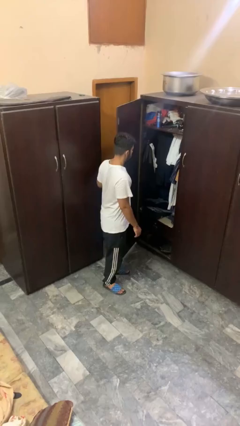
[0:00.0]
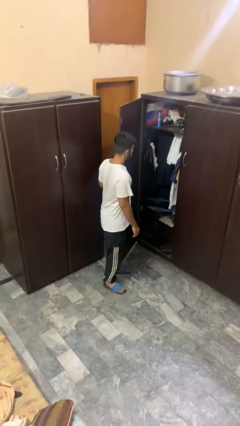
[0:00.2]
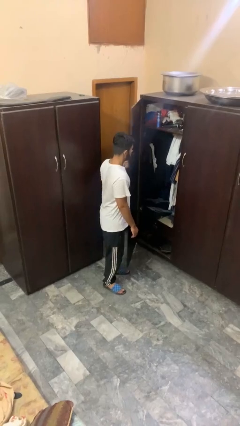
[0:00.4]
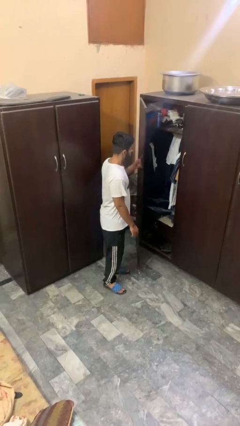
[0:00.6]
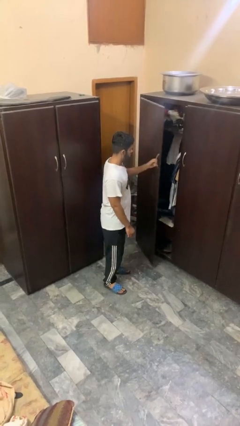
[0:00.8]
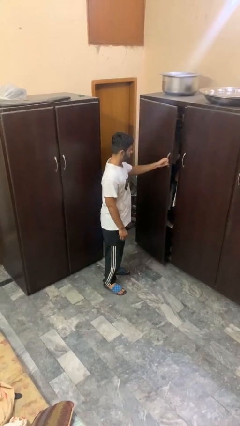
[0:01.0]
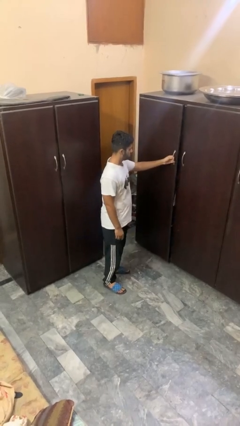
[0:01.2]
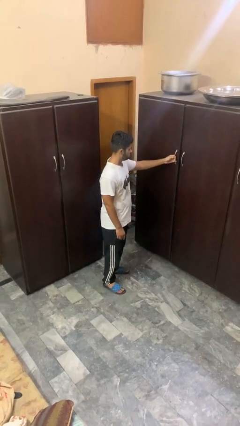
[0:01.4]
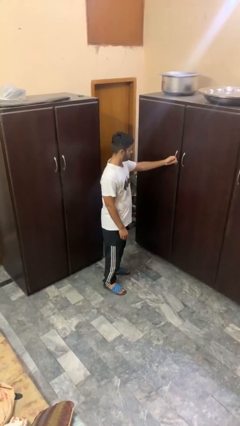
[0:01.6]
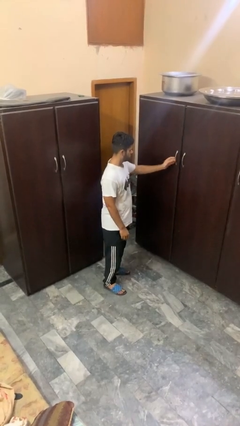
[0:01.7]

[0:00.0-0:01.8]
person closes closet door

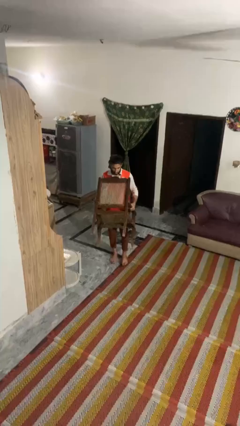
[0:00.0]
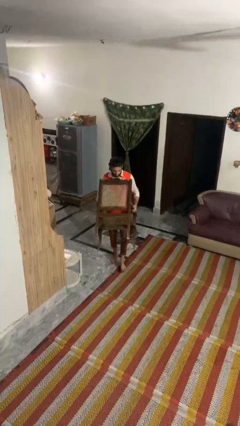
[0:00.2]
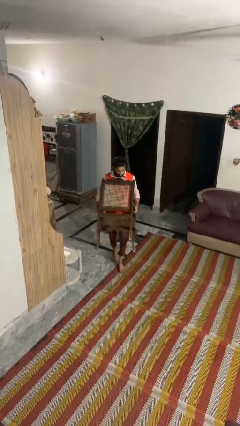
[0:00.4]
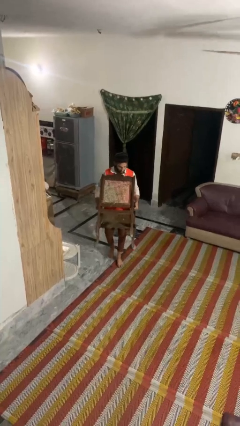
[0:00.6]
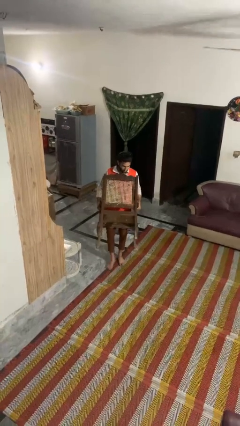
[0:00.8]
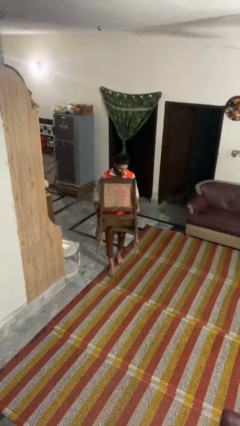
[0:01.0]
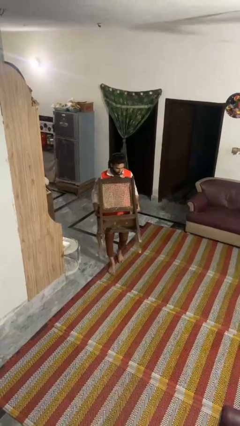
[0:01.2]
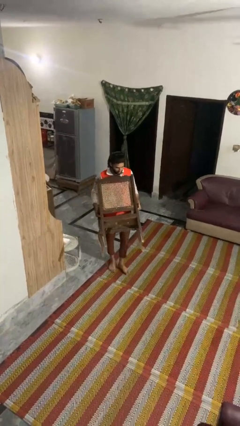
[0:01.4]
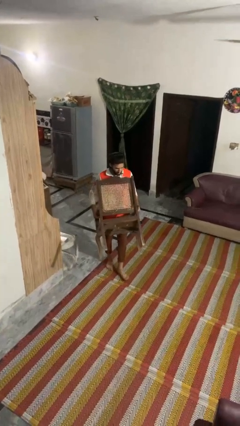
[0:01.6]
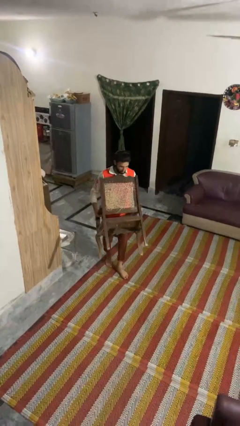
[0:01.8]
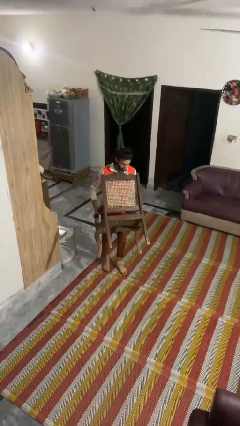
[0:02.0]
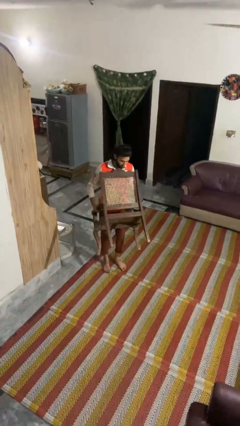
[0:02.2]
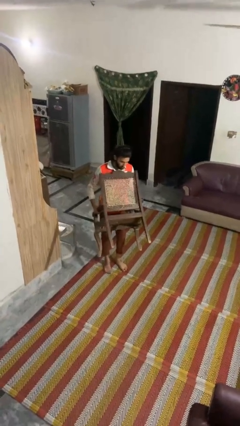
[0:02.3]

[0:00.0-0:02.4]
person carries furniture

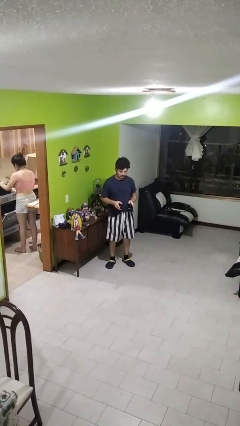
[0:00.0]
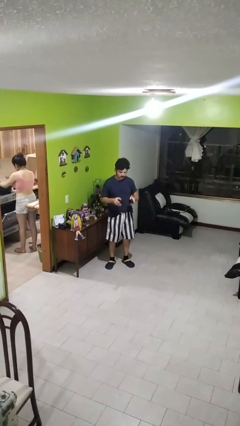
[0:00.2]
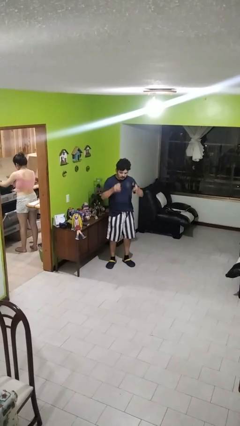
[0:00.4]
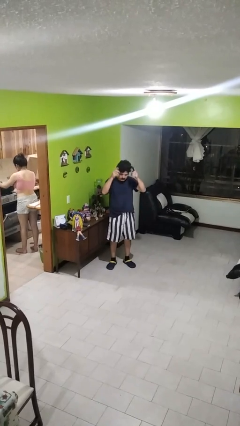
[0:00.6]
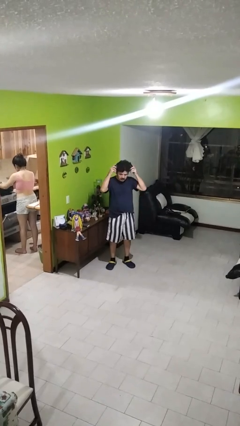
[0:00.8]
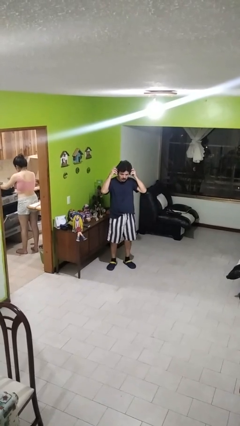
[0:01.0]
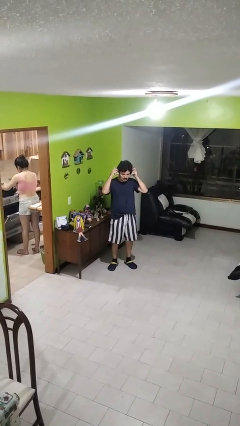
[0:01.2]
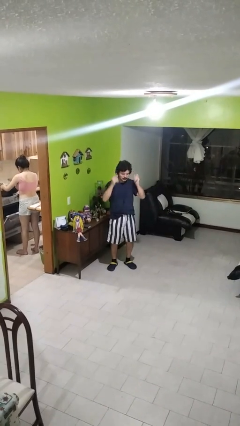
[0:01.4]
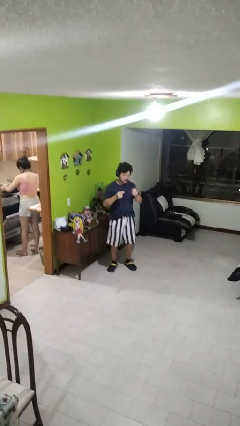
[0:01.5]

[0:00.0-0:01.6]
person puts on headphones

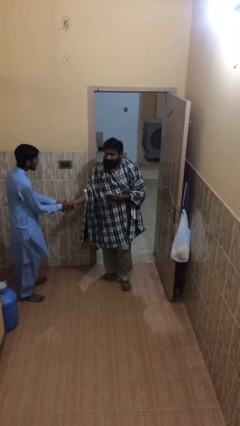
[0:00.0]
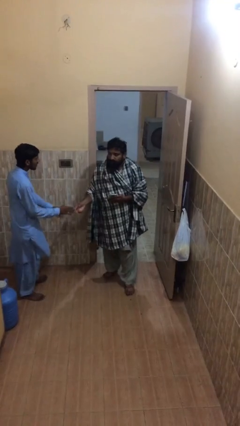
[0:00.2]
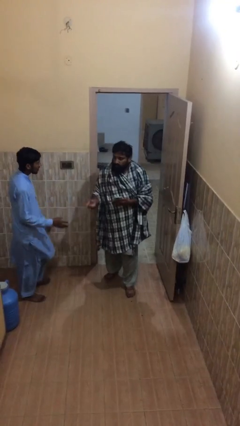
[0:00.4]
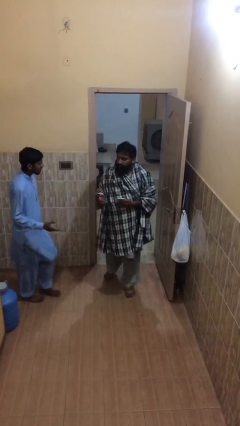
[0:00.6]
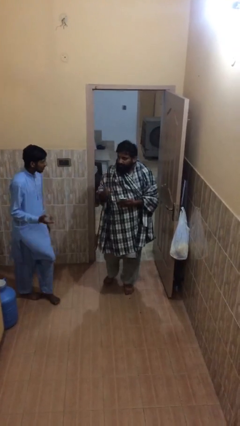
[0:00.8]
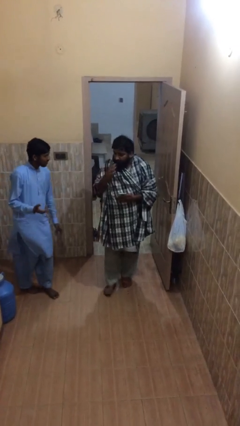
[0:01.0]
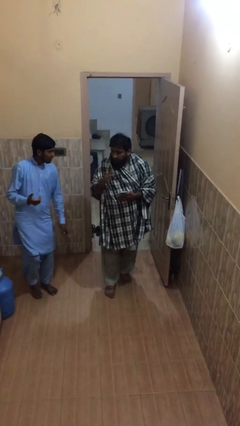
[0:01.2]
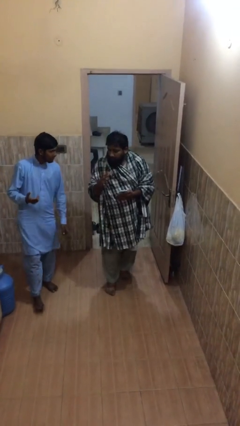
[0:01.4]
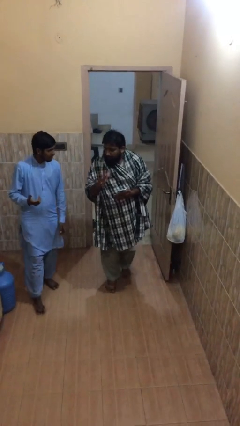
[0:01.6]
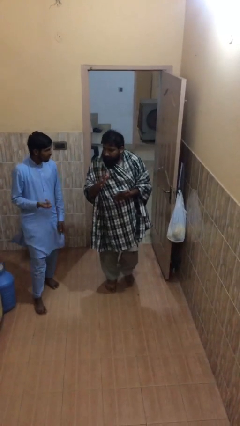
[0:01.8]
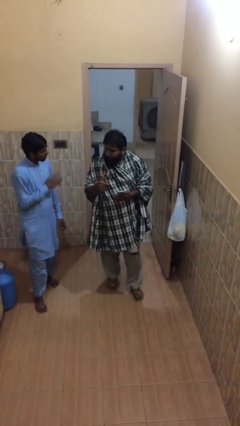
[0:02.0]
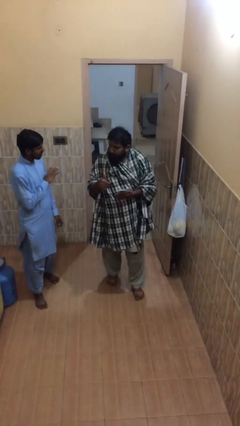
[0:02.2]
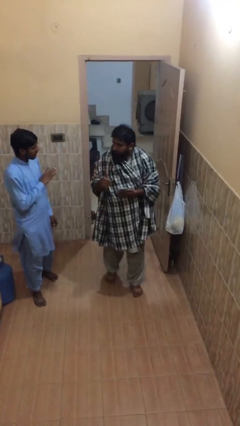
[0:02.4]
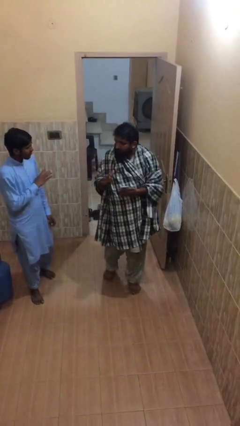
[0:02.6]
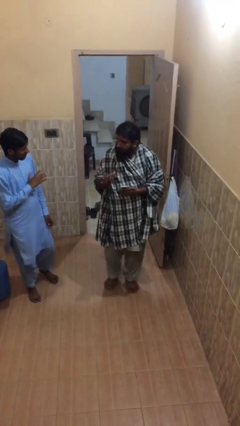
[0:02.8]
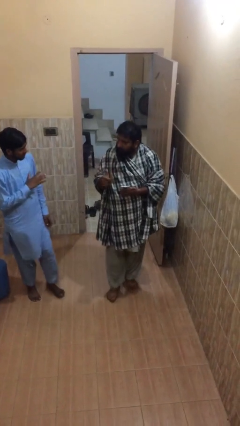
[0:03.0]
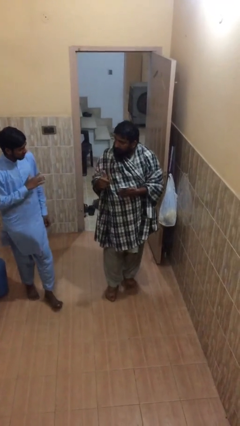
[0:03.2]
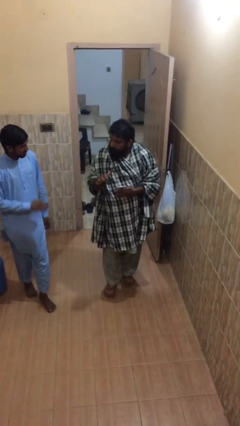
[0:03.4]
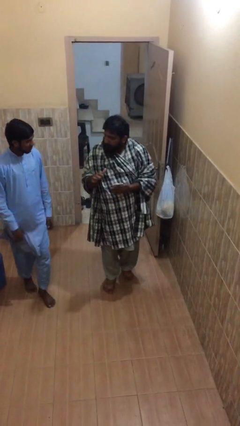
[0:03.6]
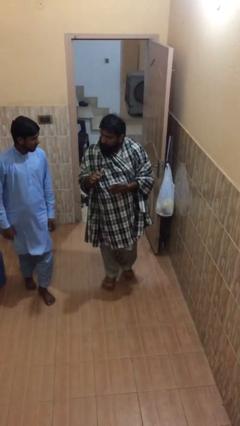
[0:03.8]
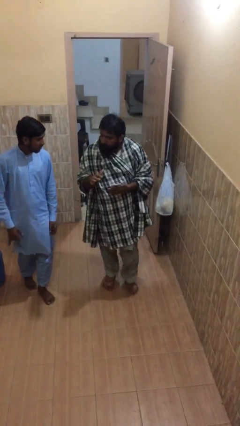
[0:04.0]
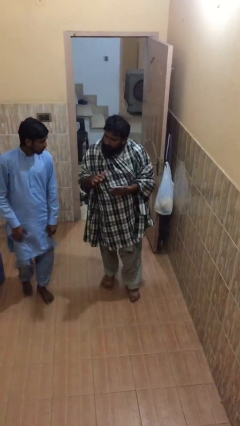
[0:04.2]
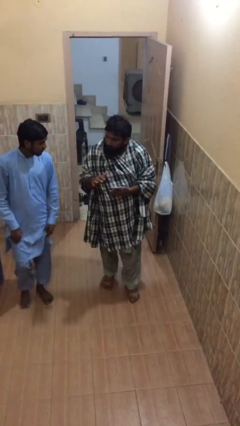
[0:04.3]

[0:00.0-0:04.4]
person talks to person

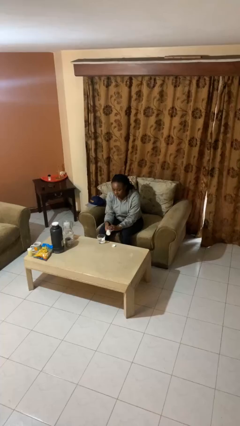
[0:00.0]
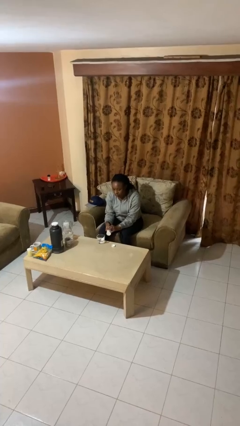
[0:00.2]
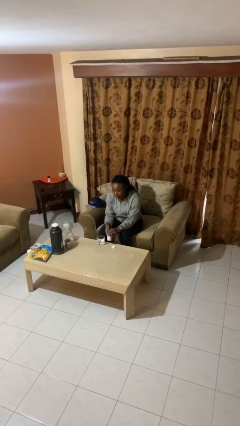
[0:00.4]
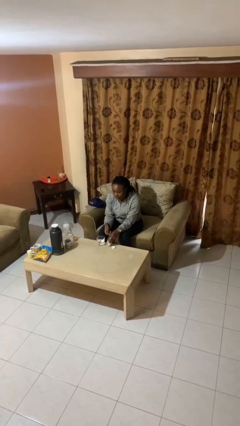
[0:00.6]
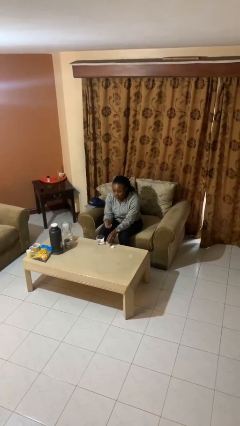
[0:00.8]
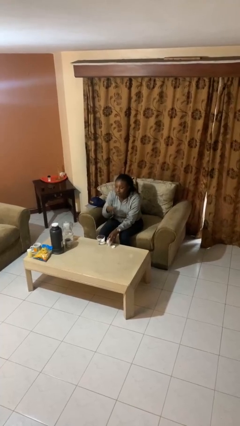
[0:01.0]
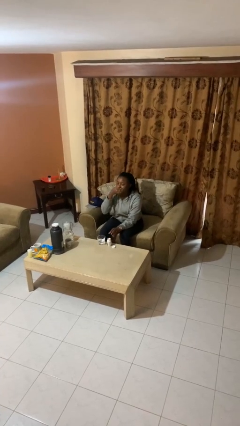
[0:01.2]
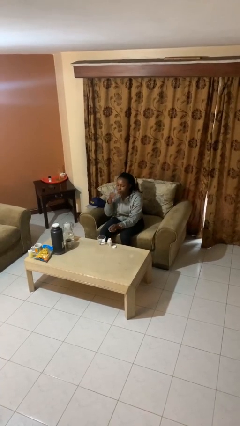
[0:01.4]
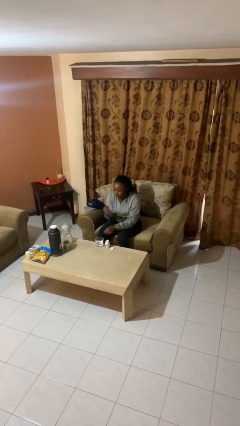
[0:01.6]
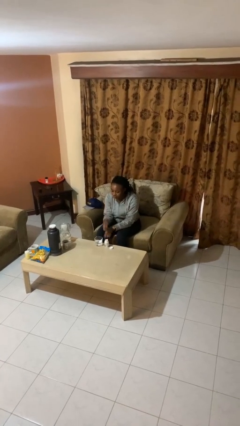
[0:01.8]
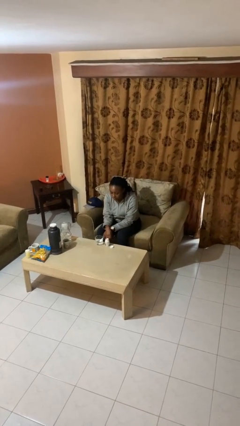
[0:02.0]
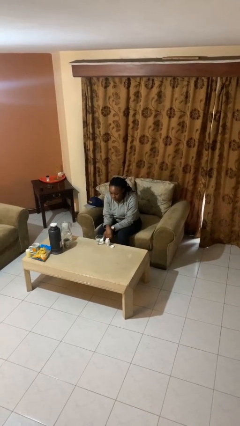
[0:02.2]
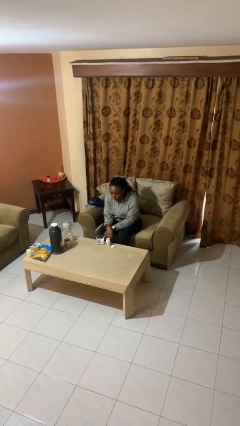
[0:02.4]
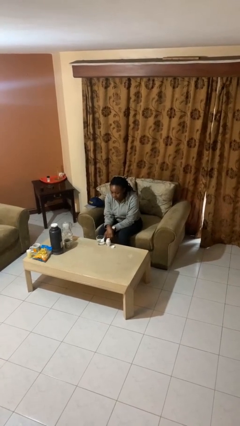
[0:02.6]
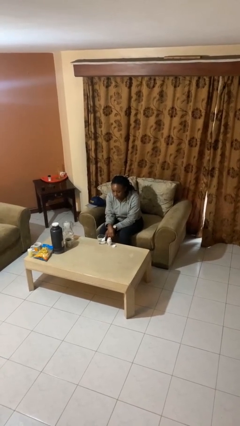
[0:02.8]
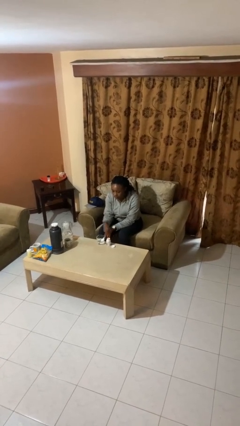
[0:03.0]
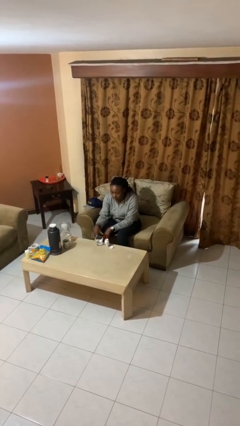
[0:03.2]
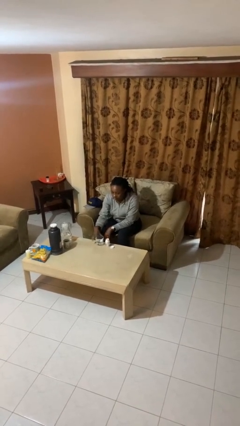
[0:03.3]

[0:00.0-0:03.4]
person takes medicine pills

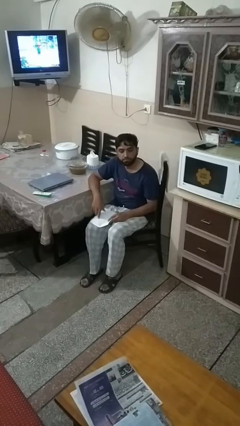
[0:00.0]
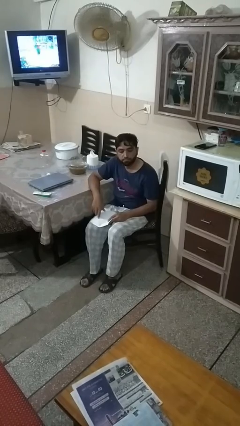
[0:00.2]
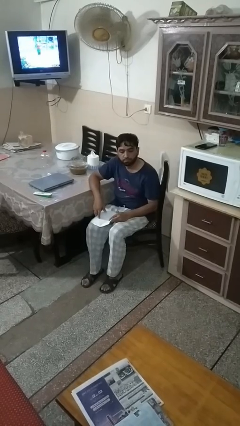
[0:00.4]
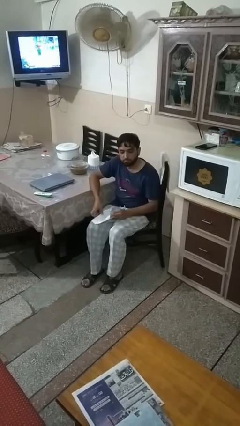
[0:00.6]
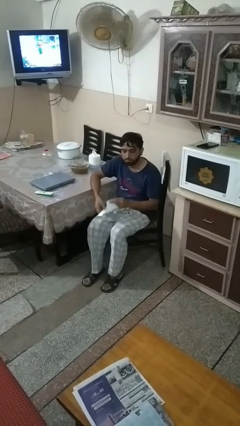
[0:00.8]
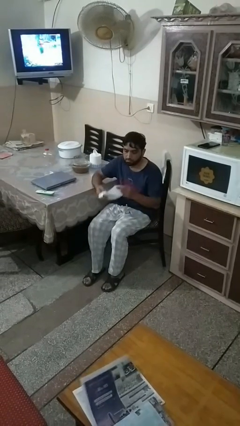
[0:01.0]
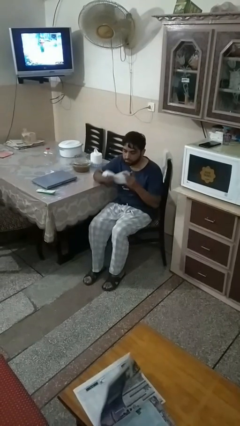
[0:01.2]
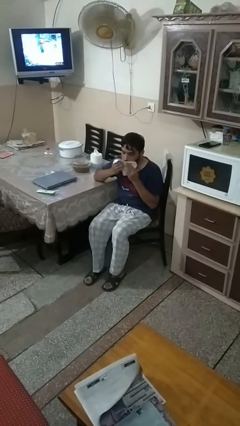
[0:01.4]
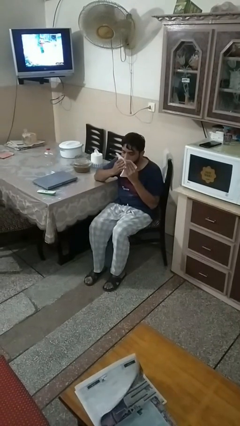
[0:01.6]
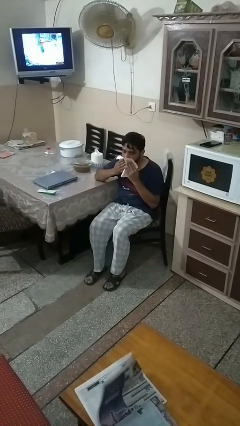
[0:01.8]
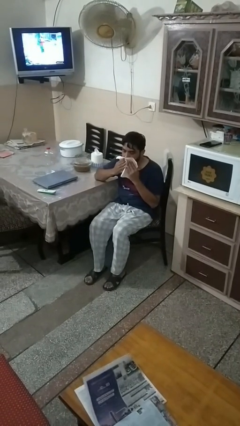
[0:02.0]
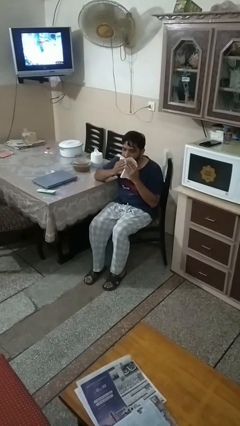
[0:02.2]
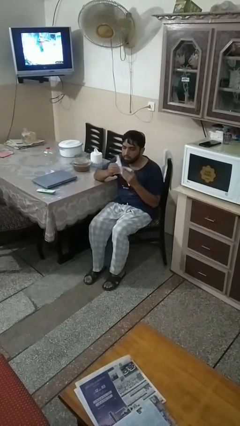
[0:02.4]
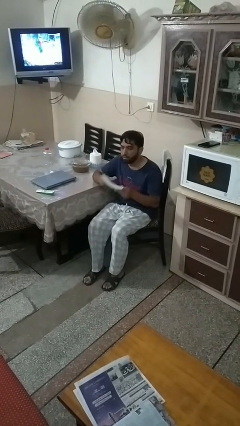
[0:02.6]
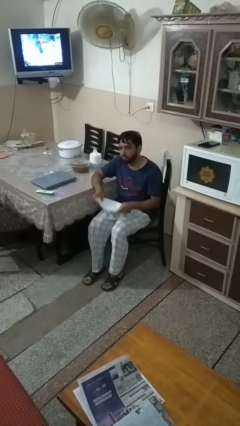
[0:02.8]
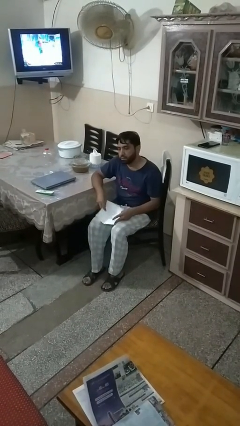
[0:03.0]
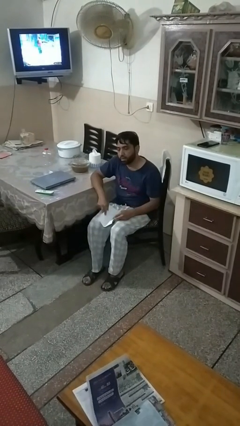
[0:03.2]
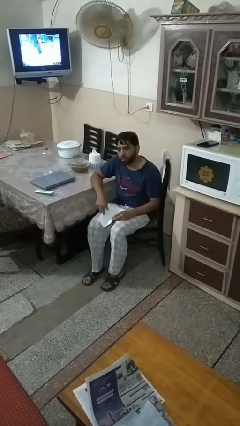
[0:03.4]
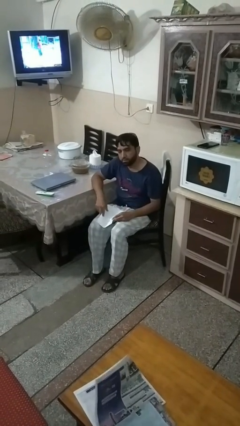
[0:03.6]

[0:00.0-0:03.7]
person wipes mouth with napkin

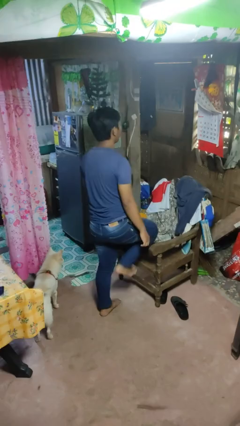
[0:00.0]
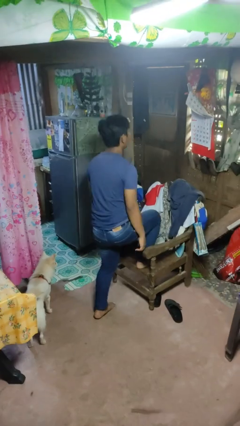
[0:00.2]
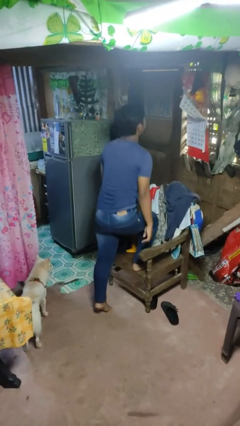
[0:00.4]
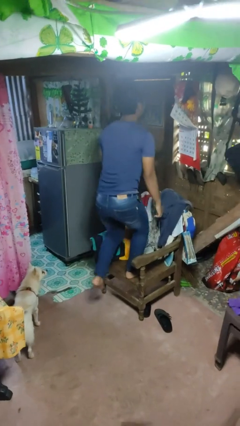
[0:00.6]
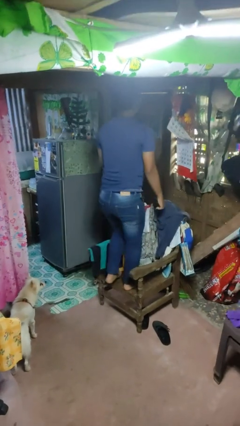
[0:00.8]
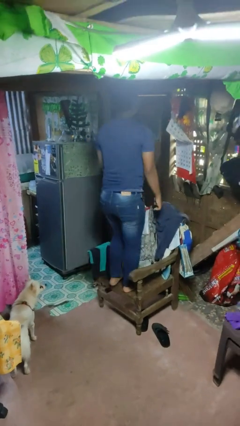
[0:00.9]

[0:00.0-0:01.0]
person climbs on chair
